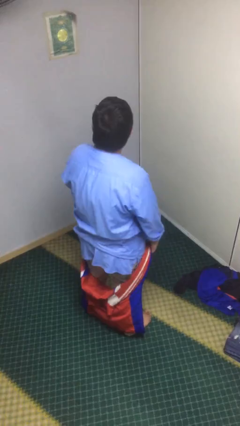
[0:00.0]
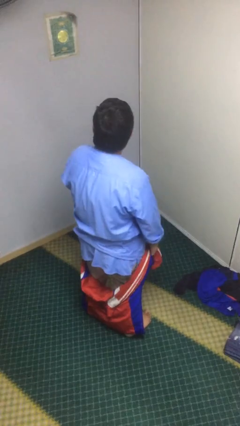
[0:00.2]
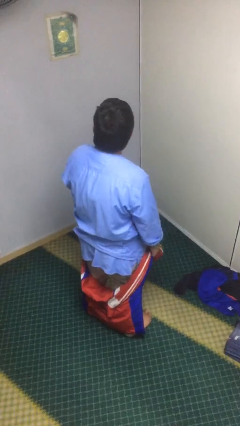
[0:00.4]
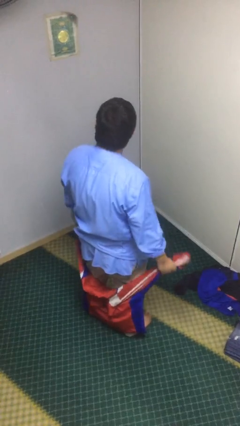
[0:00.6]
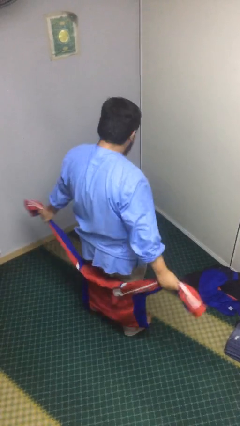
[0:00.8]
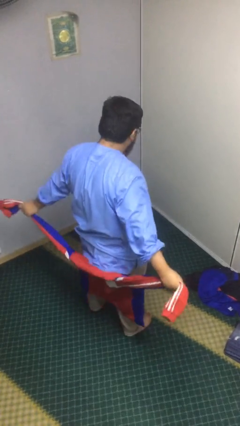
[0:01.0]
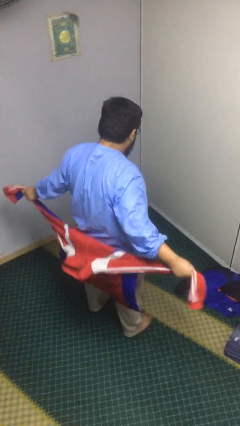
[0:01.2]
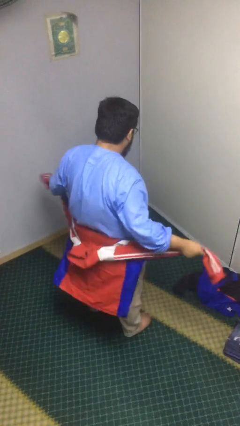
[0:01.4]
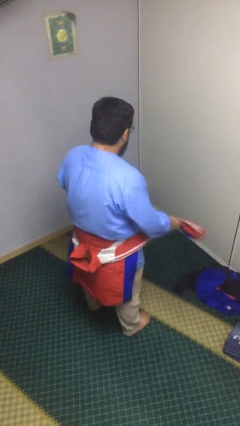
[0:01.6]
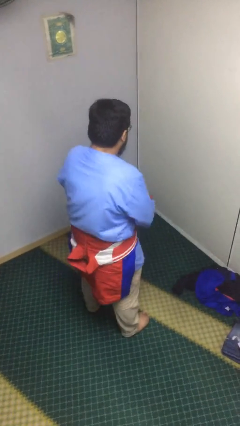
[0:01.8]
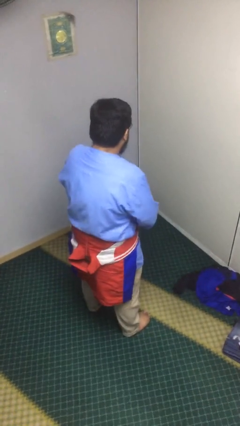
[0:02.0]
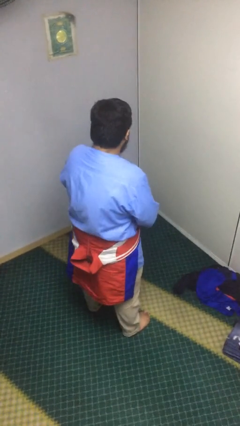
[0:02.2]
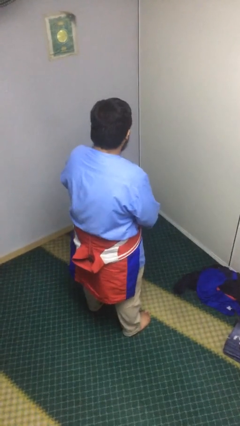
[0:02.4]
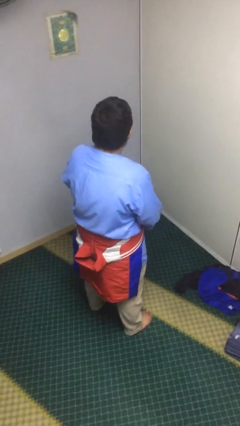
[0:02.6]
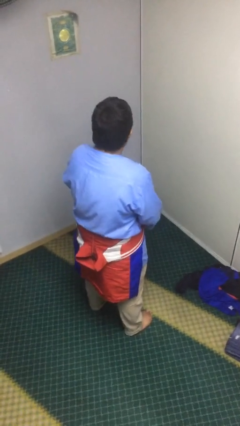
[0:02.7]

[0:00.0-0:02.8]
person ties jacket around waist

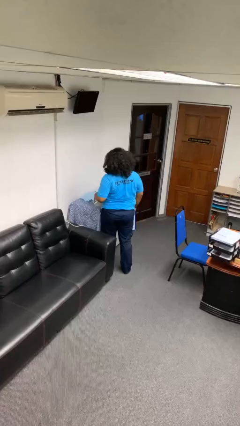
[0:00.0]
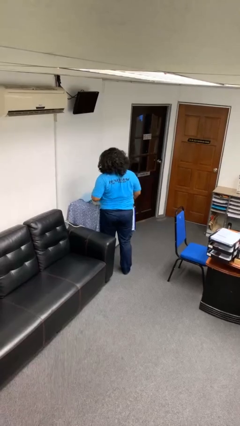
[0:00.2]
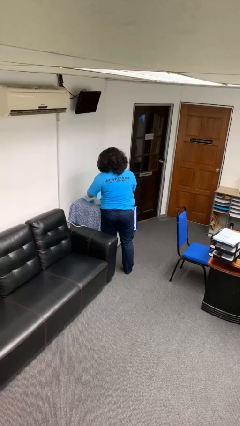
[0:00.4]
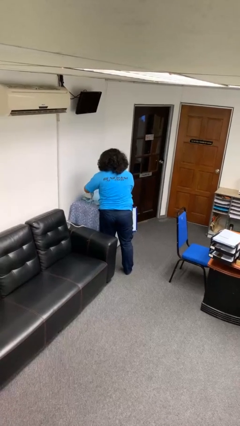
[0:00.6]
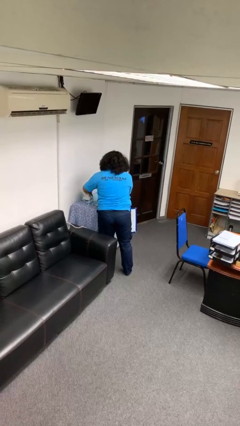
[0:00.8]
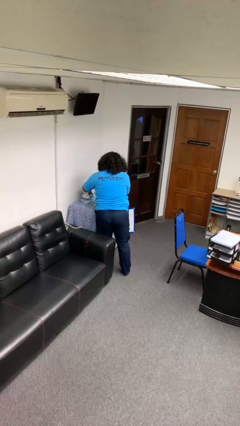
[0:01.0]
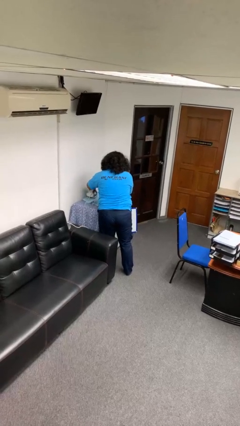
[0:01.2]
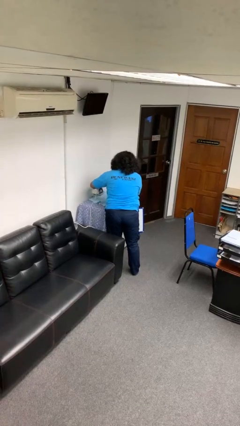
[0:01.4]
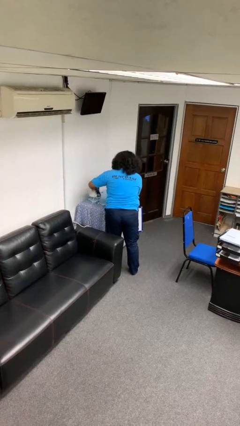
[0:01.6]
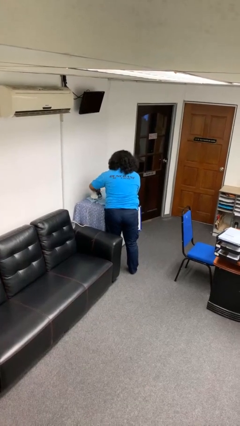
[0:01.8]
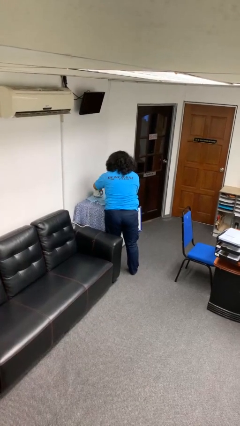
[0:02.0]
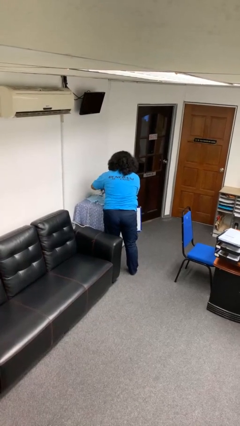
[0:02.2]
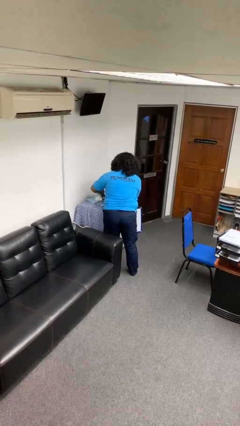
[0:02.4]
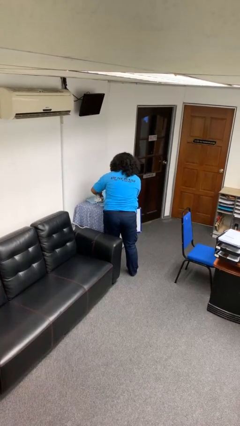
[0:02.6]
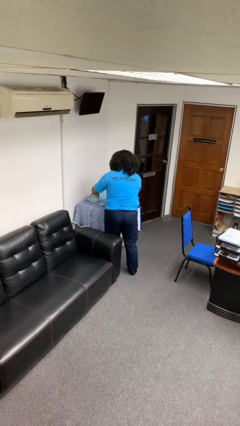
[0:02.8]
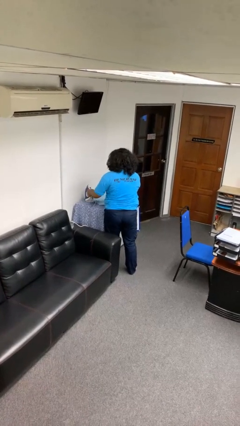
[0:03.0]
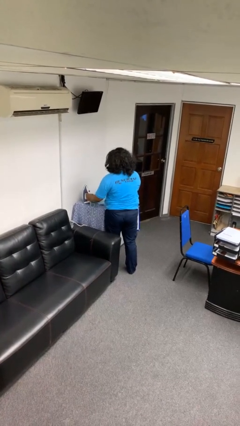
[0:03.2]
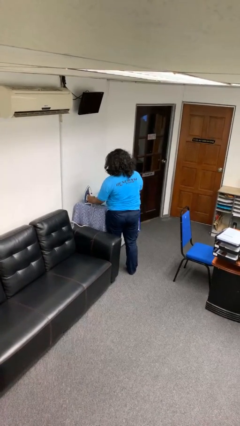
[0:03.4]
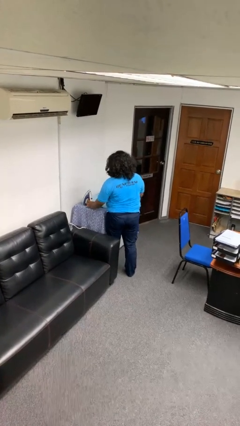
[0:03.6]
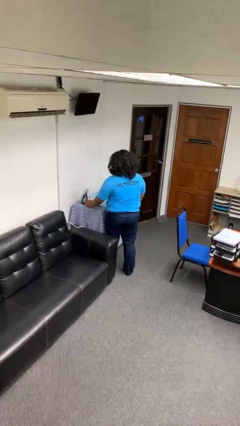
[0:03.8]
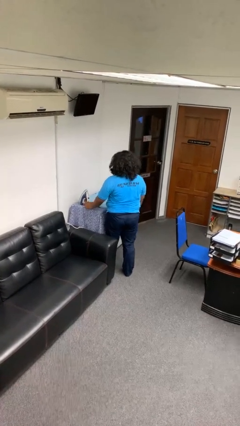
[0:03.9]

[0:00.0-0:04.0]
person irons clothes

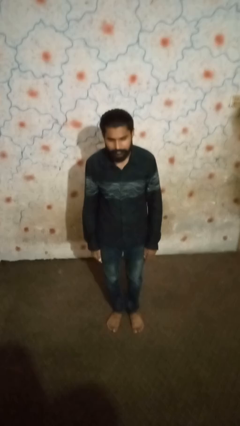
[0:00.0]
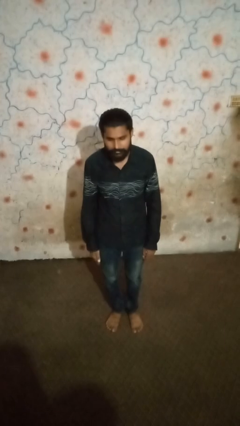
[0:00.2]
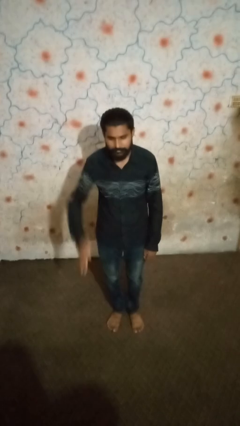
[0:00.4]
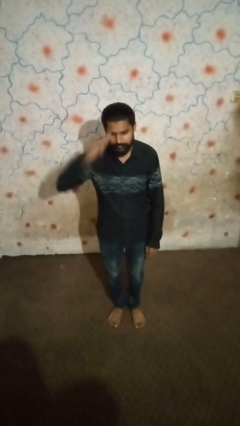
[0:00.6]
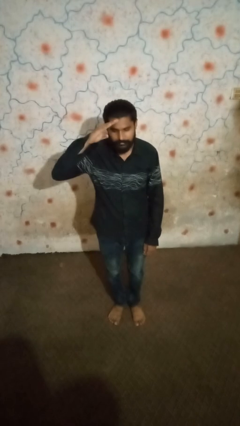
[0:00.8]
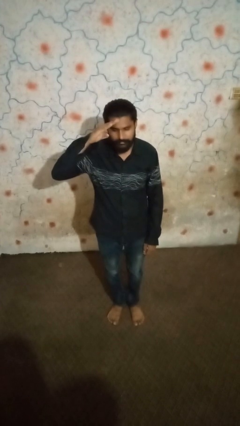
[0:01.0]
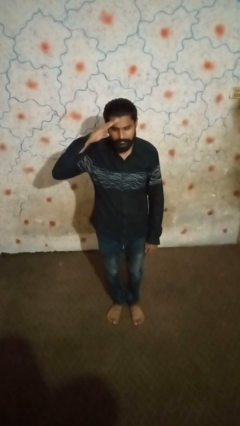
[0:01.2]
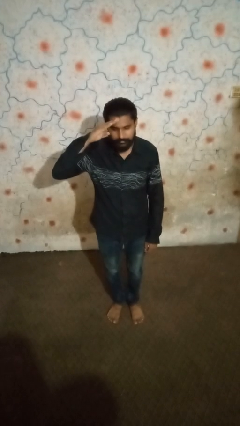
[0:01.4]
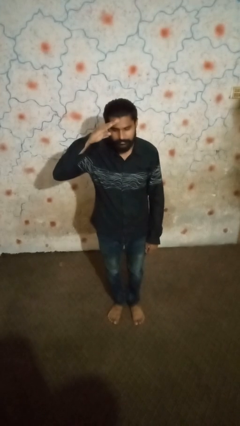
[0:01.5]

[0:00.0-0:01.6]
person salutes

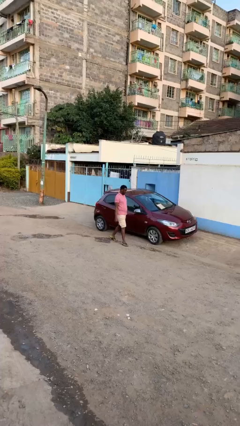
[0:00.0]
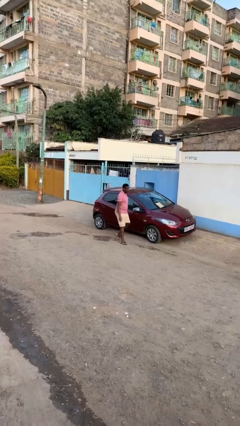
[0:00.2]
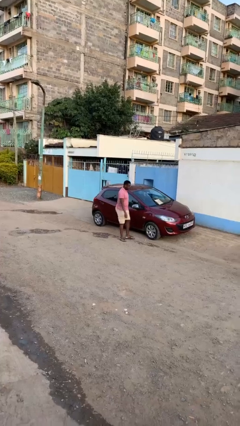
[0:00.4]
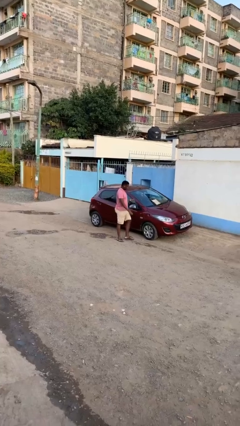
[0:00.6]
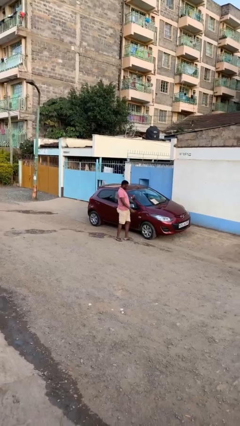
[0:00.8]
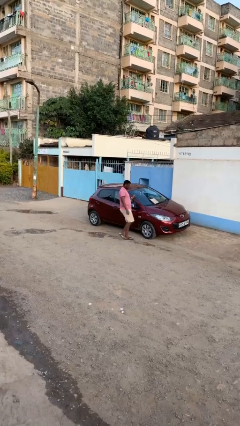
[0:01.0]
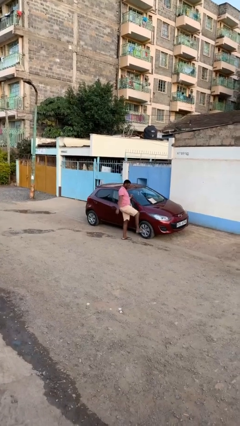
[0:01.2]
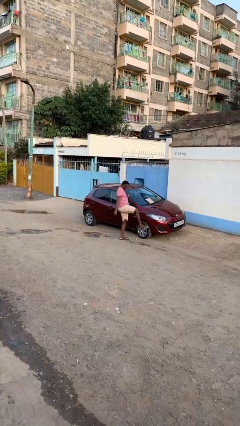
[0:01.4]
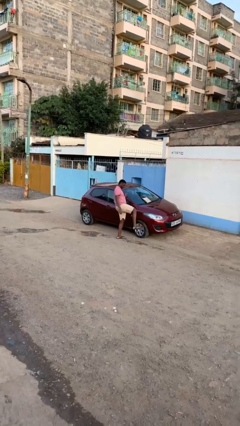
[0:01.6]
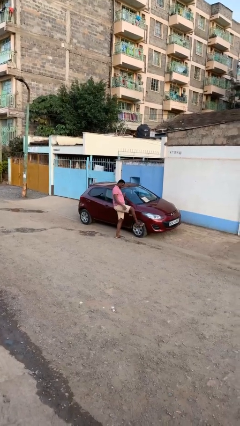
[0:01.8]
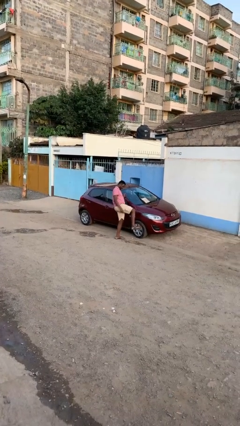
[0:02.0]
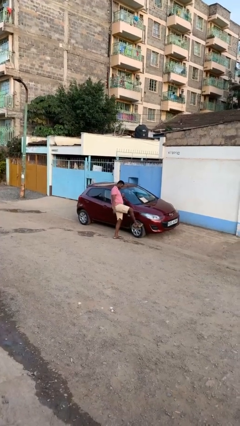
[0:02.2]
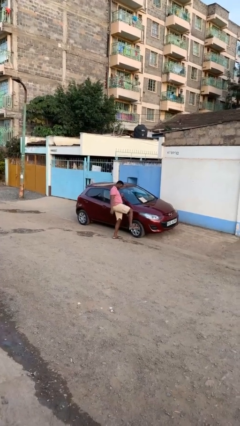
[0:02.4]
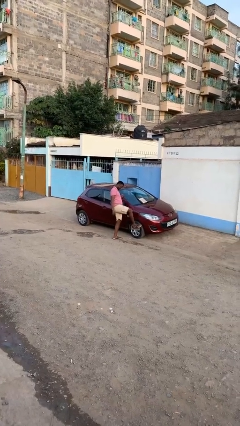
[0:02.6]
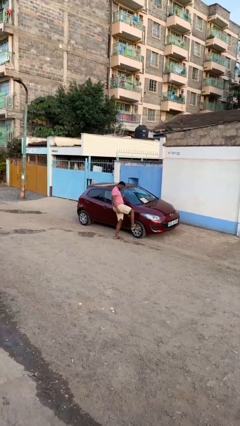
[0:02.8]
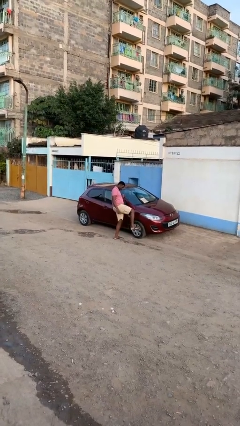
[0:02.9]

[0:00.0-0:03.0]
person kicks car tires

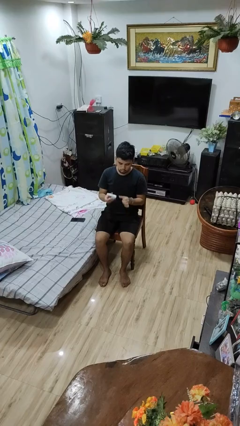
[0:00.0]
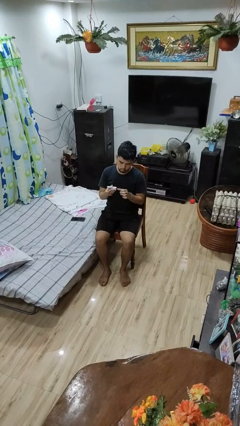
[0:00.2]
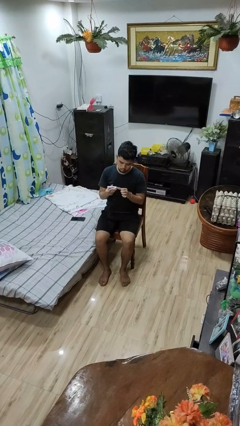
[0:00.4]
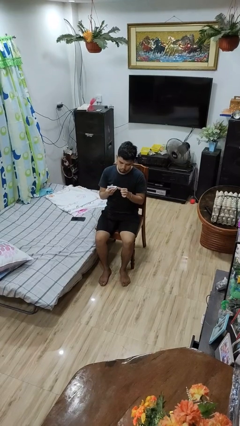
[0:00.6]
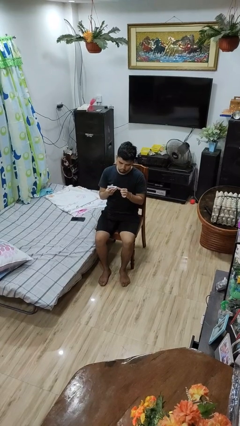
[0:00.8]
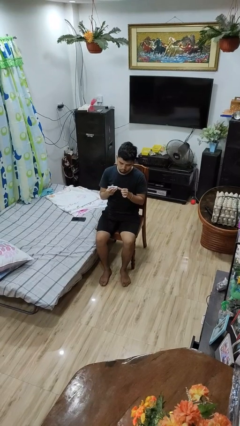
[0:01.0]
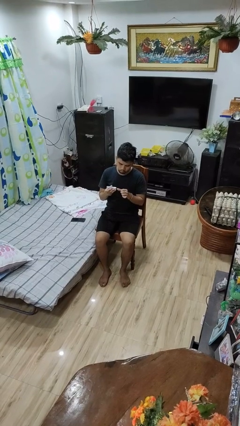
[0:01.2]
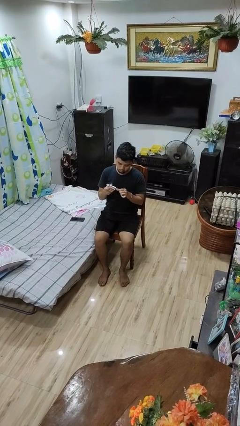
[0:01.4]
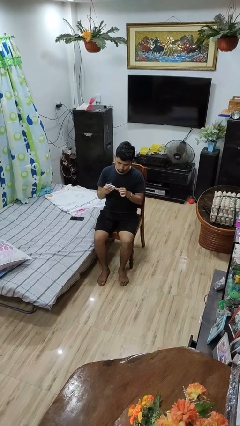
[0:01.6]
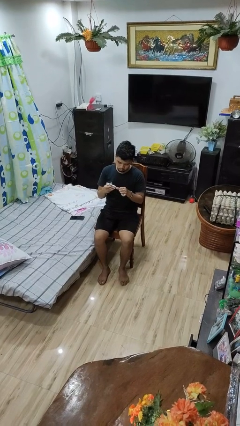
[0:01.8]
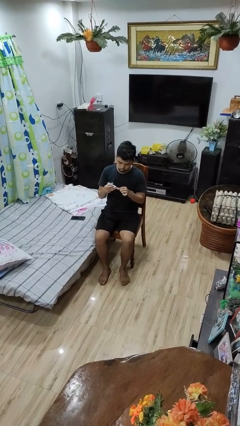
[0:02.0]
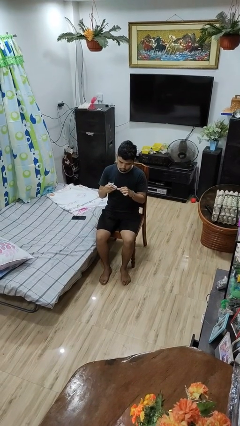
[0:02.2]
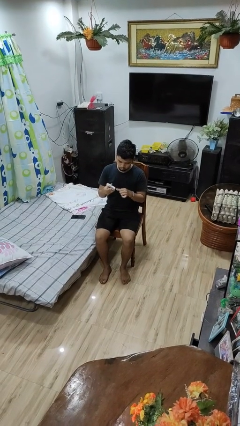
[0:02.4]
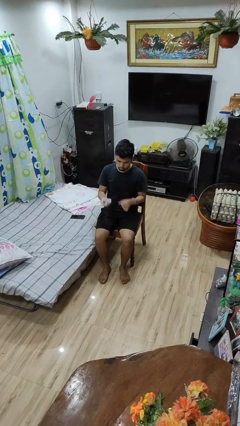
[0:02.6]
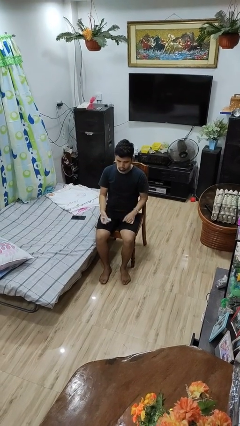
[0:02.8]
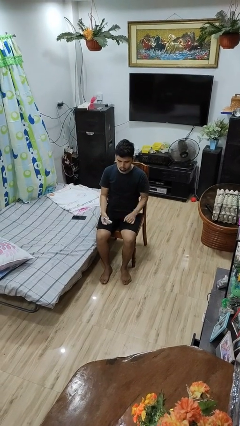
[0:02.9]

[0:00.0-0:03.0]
person clips fingernails

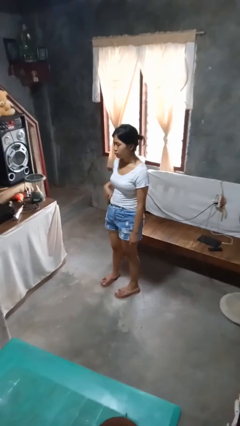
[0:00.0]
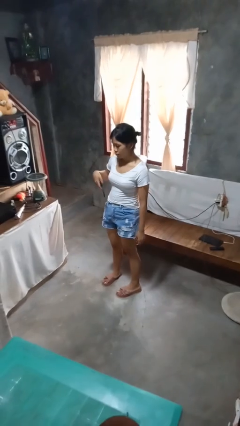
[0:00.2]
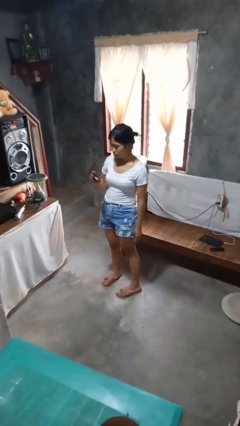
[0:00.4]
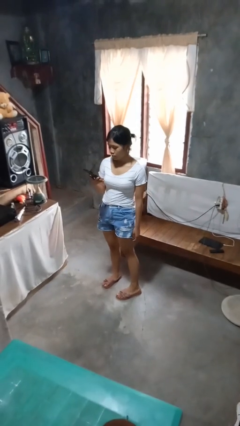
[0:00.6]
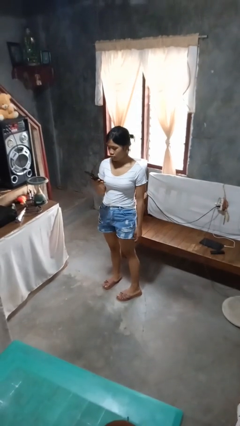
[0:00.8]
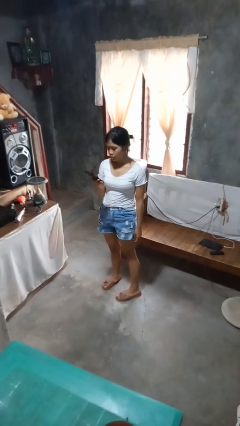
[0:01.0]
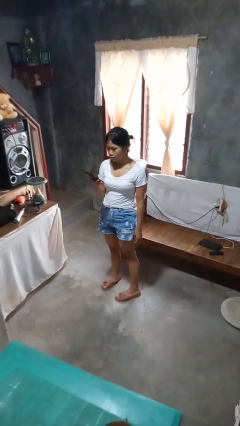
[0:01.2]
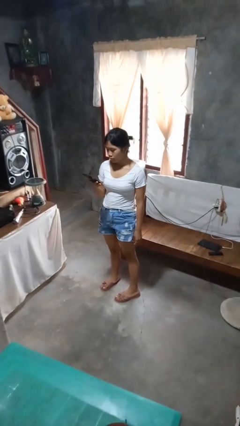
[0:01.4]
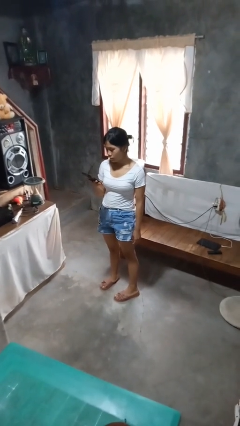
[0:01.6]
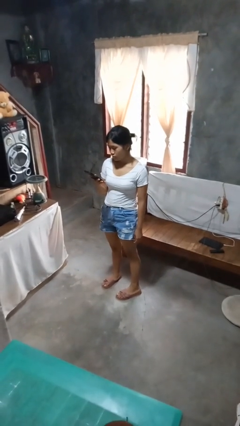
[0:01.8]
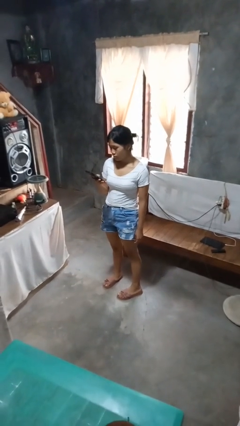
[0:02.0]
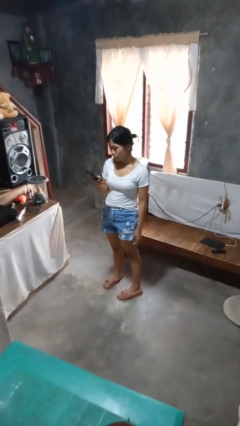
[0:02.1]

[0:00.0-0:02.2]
person takes phone from pocket

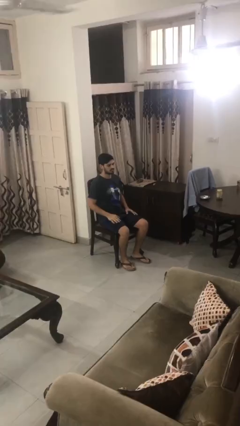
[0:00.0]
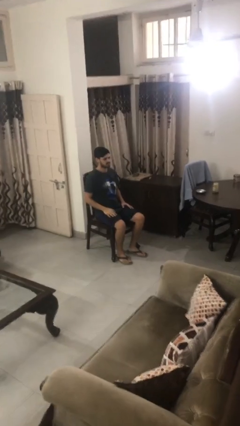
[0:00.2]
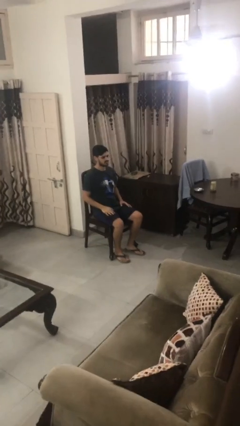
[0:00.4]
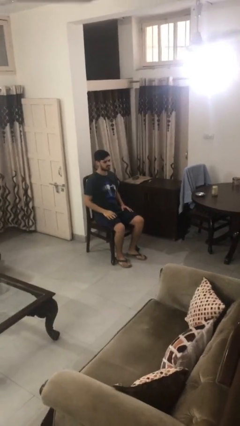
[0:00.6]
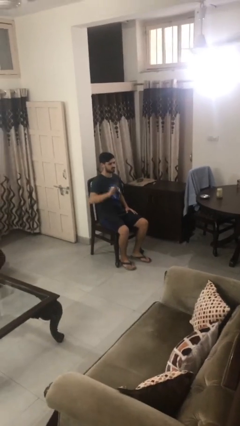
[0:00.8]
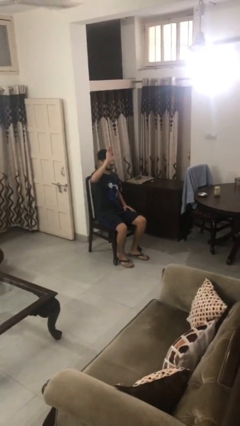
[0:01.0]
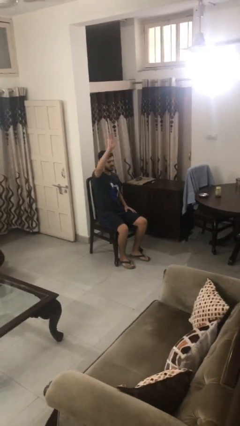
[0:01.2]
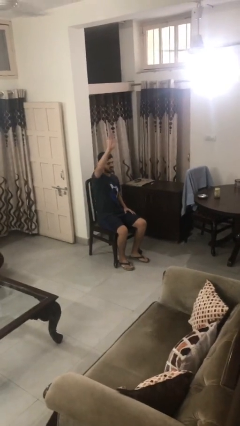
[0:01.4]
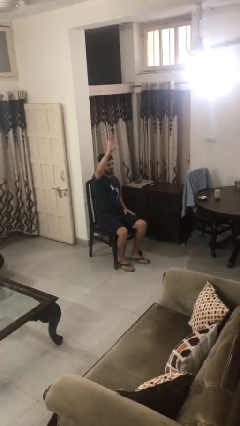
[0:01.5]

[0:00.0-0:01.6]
person gestures raise hand
